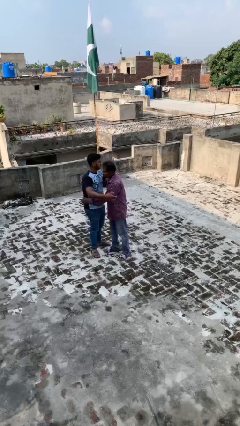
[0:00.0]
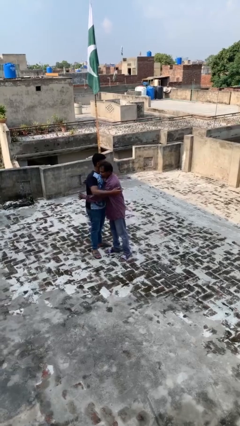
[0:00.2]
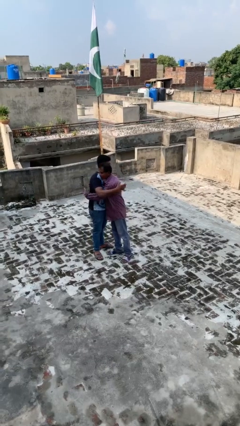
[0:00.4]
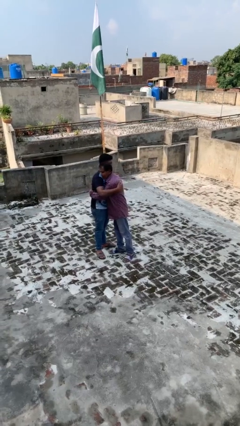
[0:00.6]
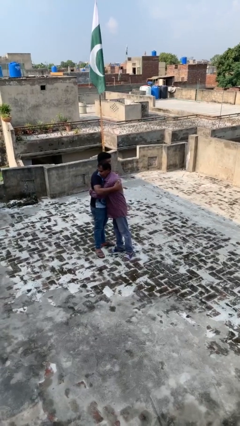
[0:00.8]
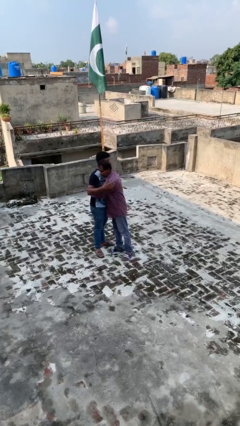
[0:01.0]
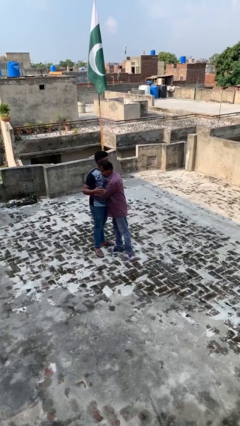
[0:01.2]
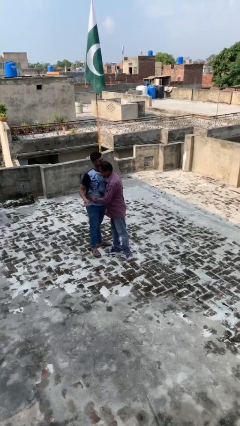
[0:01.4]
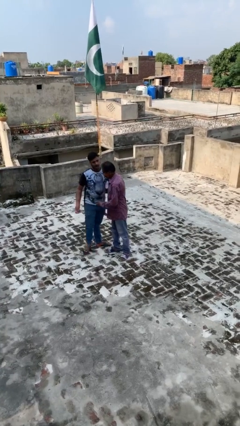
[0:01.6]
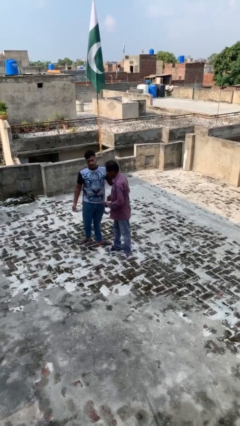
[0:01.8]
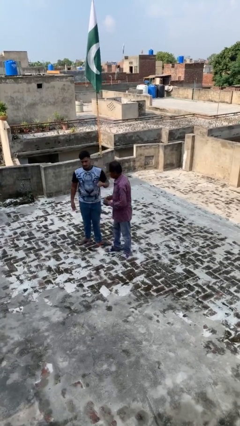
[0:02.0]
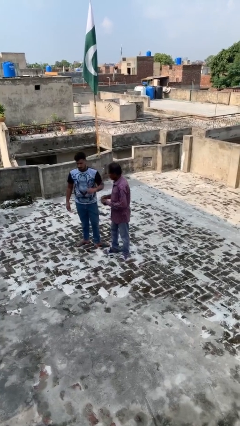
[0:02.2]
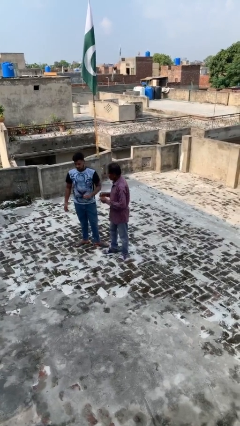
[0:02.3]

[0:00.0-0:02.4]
person embraces person

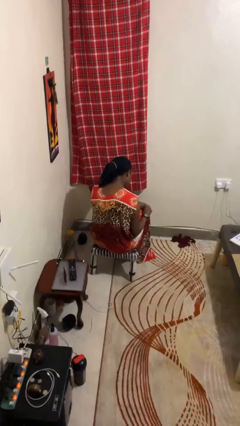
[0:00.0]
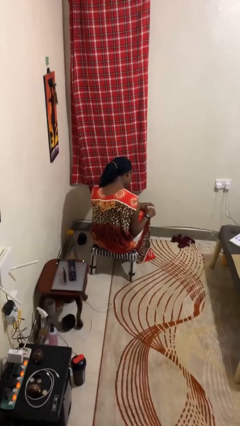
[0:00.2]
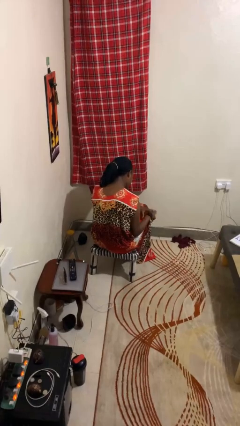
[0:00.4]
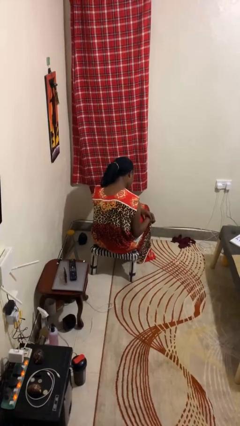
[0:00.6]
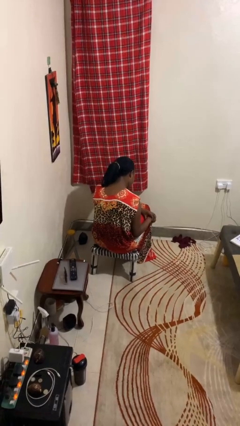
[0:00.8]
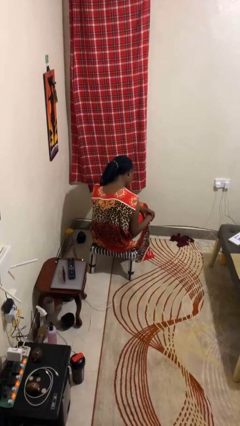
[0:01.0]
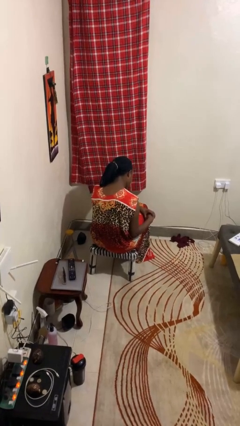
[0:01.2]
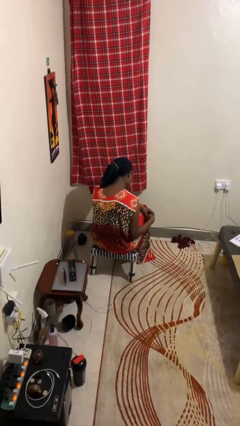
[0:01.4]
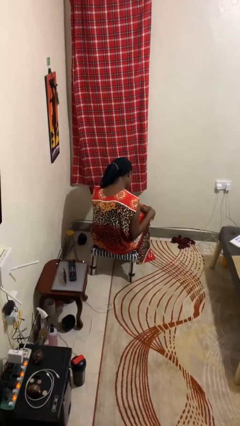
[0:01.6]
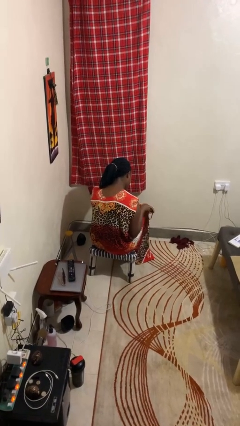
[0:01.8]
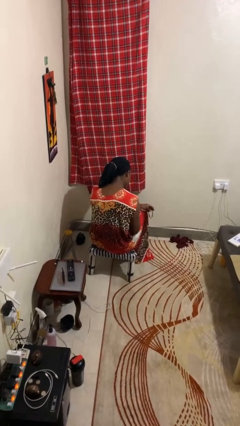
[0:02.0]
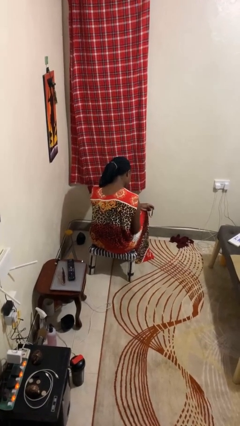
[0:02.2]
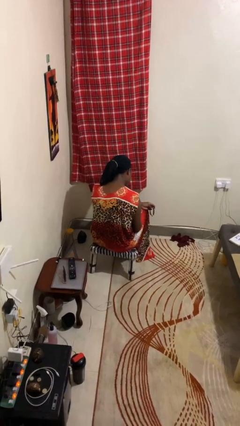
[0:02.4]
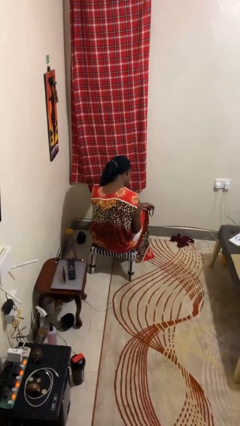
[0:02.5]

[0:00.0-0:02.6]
person takes off wristwatch

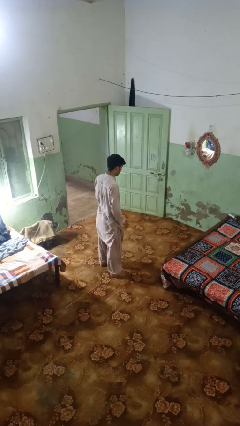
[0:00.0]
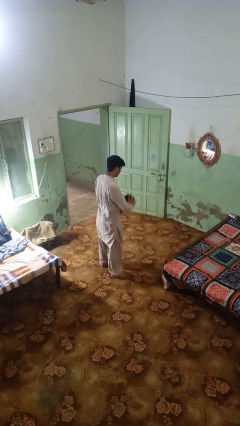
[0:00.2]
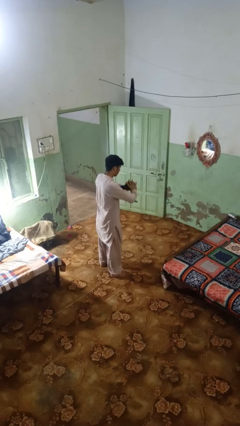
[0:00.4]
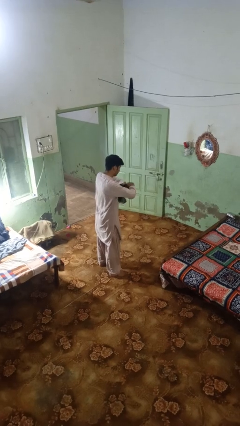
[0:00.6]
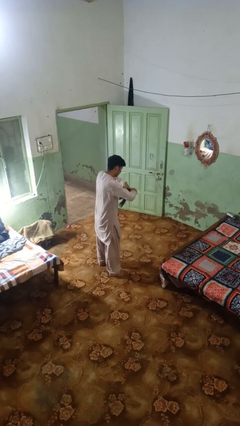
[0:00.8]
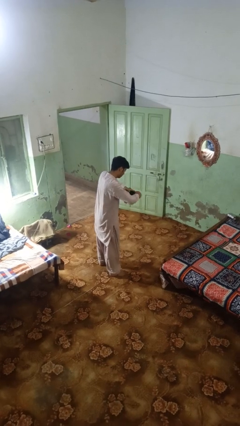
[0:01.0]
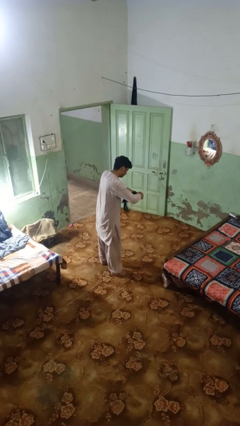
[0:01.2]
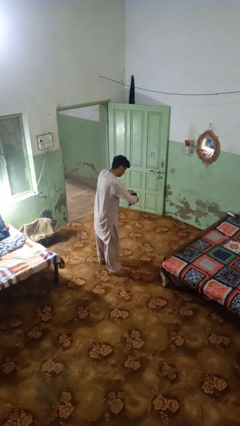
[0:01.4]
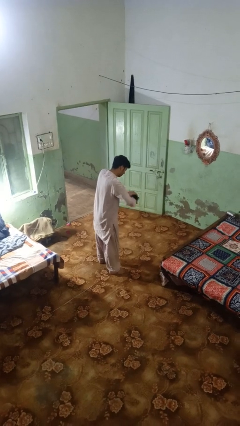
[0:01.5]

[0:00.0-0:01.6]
person squeezes object

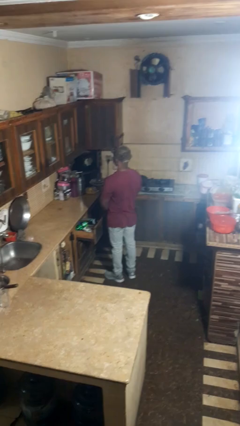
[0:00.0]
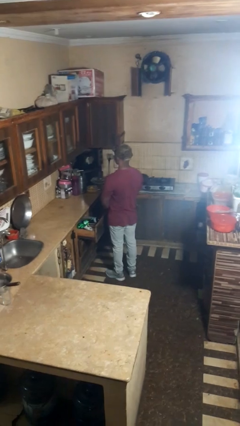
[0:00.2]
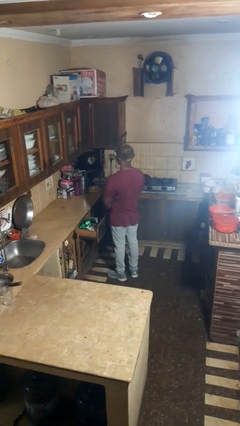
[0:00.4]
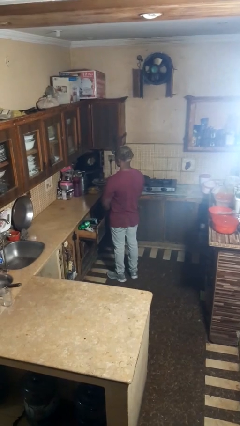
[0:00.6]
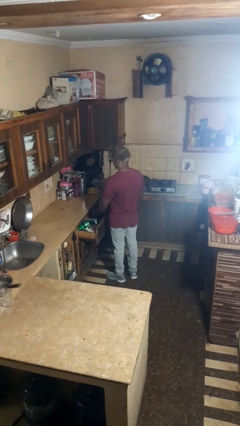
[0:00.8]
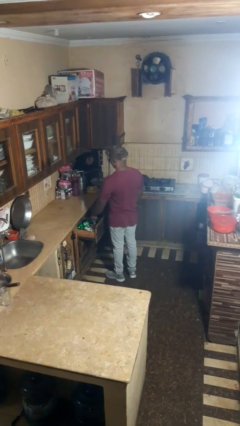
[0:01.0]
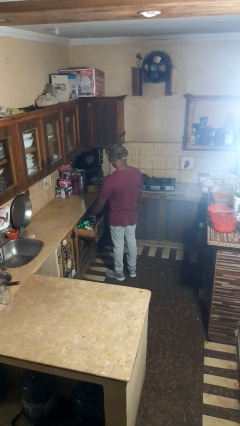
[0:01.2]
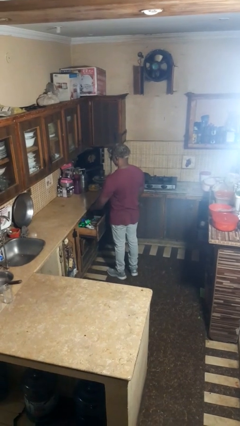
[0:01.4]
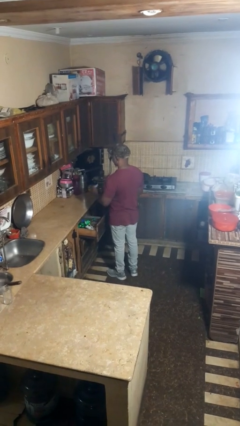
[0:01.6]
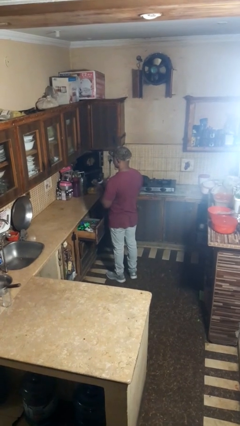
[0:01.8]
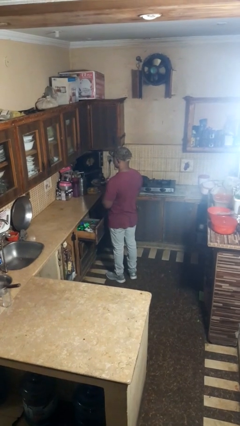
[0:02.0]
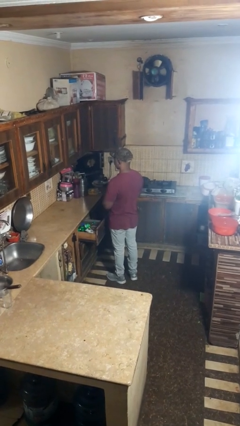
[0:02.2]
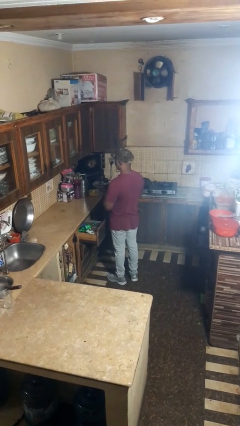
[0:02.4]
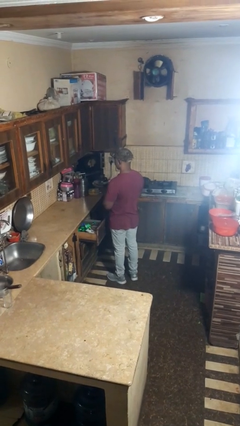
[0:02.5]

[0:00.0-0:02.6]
person takes object from kitchen drawer

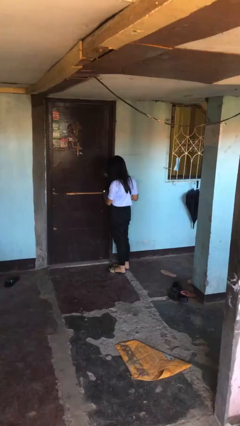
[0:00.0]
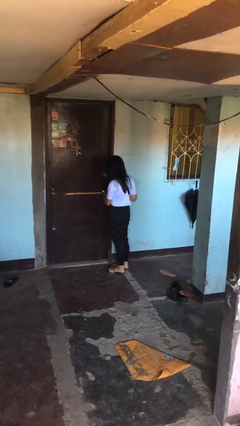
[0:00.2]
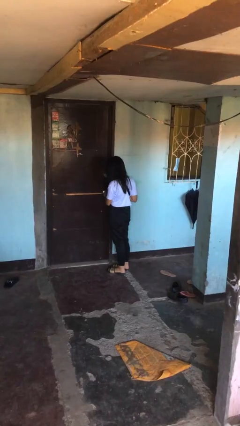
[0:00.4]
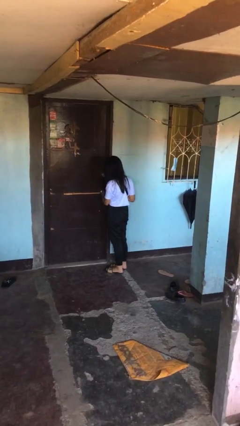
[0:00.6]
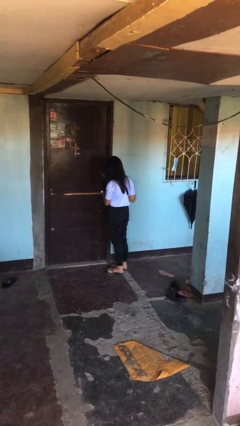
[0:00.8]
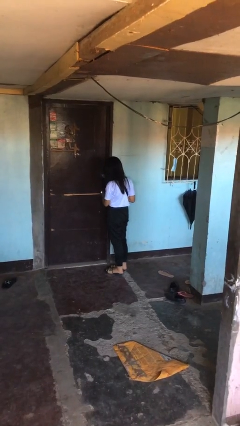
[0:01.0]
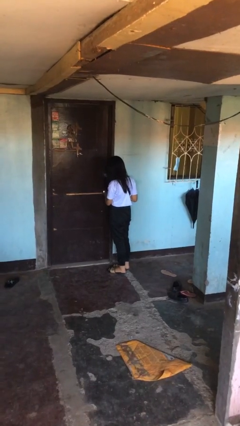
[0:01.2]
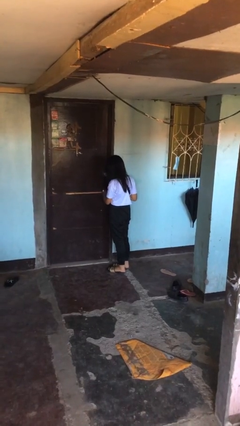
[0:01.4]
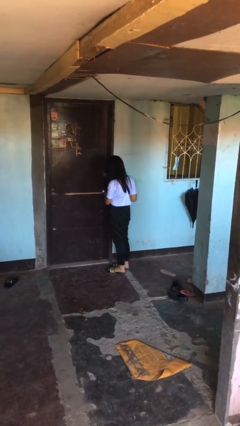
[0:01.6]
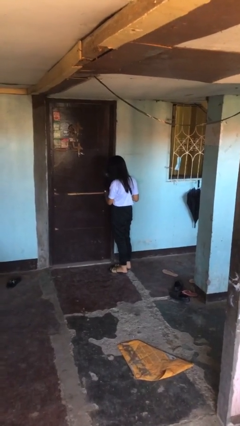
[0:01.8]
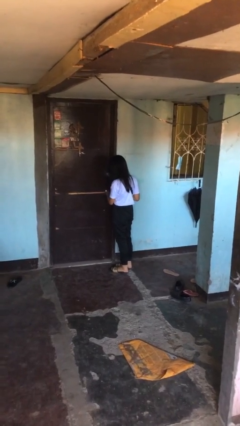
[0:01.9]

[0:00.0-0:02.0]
person unlocks door with keys

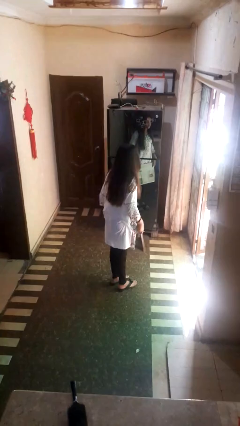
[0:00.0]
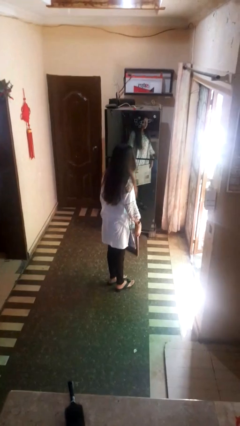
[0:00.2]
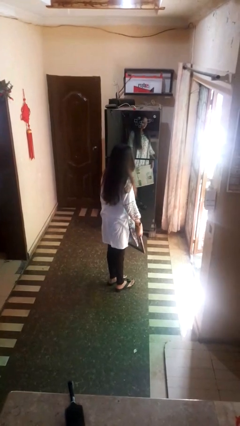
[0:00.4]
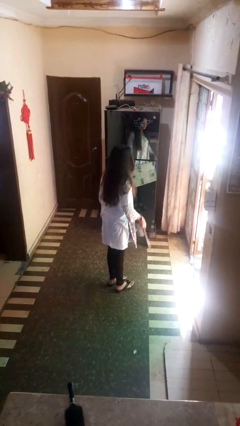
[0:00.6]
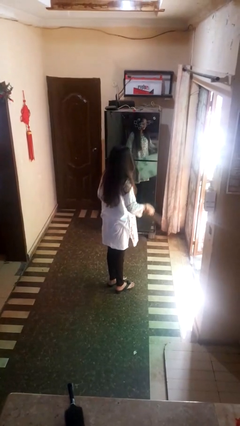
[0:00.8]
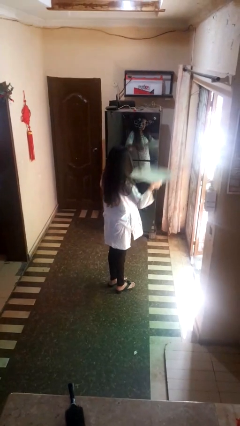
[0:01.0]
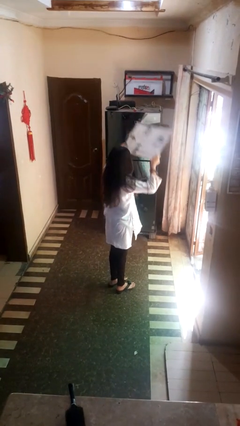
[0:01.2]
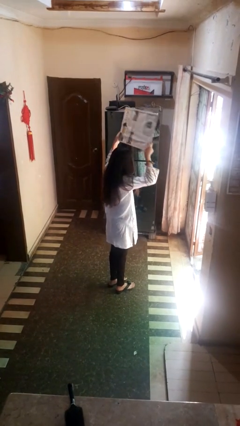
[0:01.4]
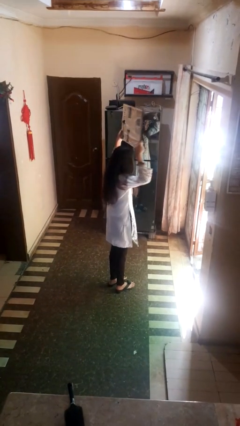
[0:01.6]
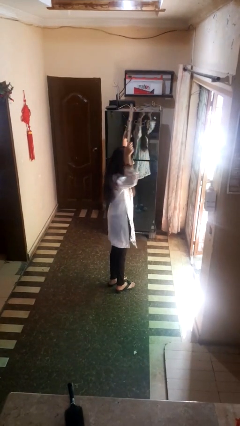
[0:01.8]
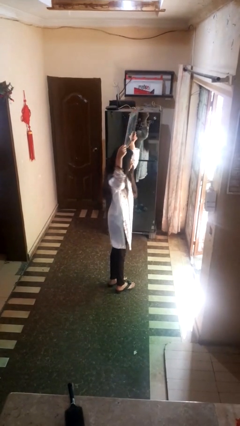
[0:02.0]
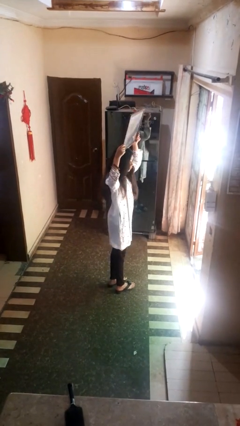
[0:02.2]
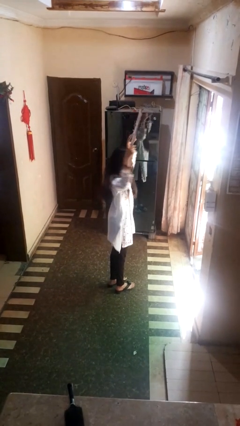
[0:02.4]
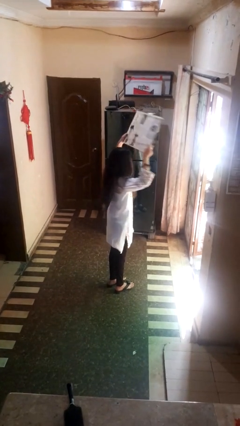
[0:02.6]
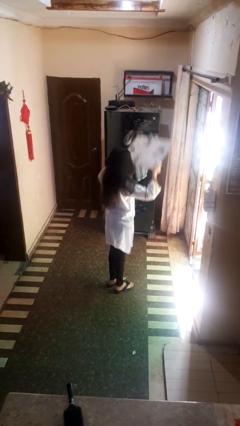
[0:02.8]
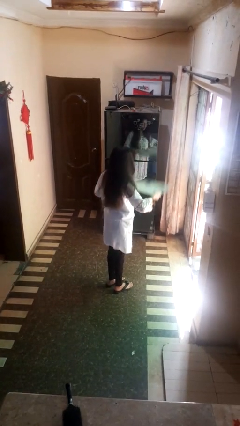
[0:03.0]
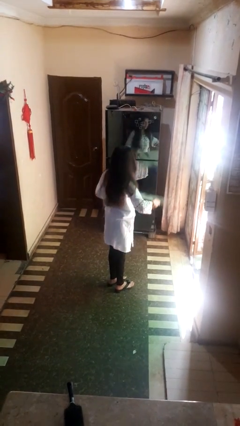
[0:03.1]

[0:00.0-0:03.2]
person holds object above head

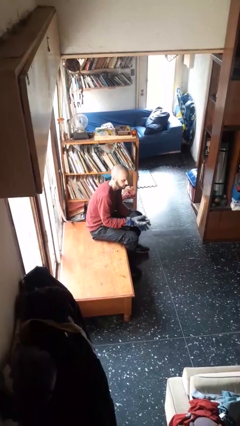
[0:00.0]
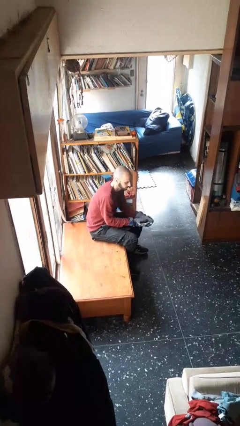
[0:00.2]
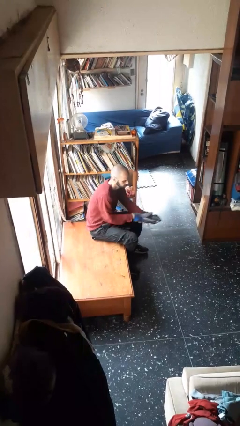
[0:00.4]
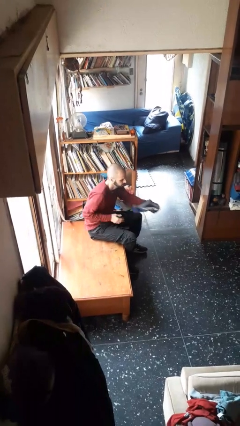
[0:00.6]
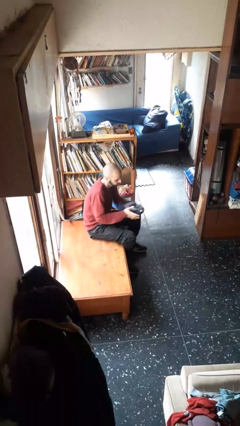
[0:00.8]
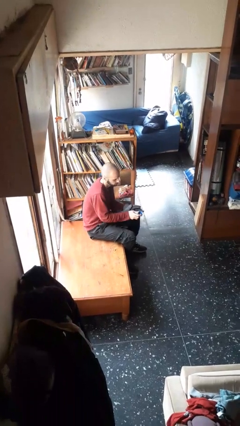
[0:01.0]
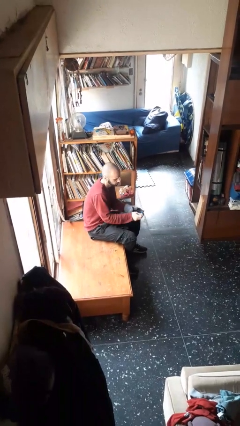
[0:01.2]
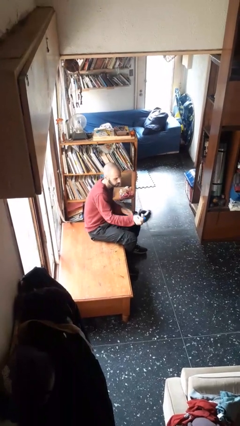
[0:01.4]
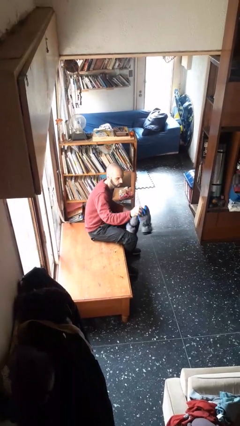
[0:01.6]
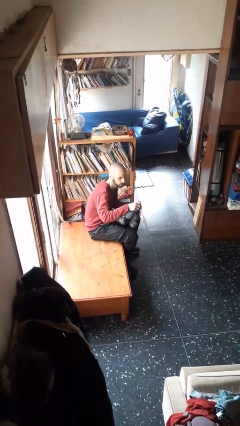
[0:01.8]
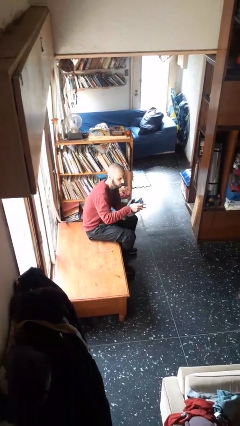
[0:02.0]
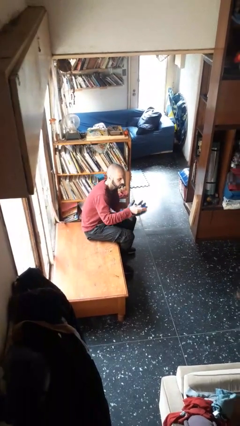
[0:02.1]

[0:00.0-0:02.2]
person takes off gloves

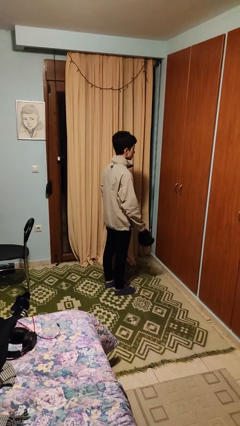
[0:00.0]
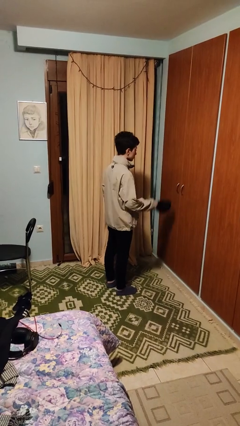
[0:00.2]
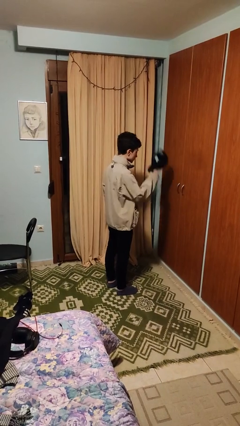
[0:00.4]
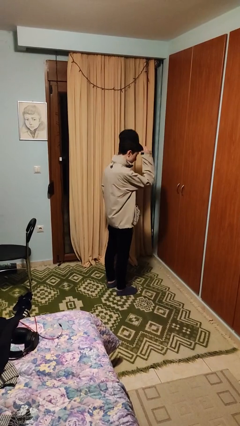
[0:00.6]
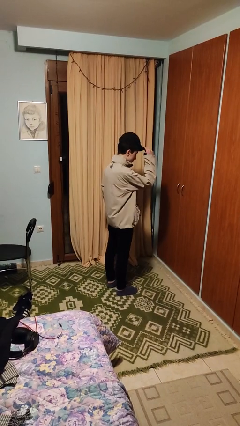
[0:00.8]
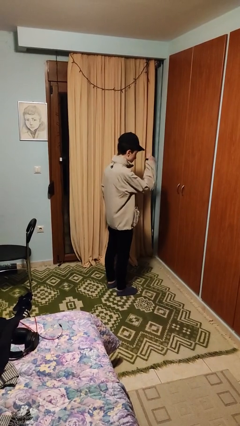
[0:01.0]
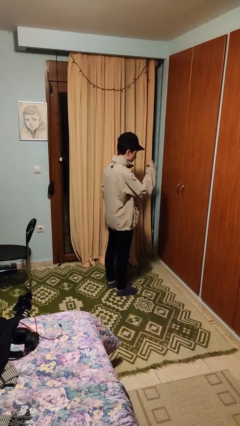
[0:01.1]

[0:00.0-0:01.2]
person puts on hat
